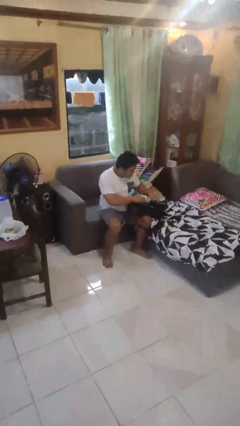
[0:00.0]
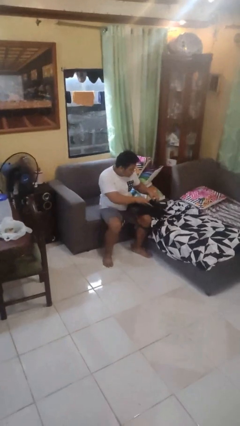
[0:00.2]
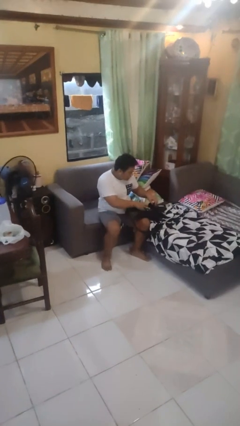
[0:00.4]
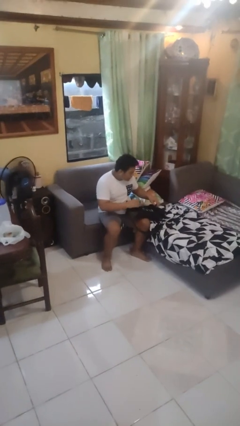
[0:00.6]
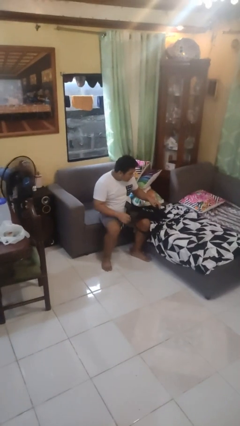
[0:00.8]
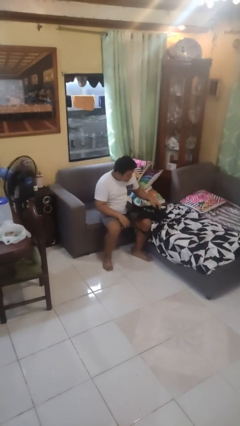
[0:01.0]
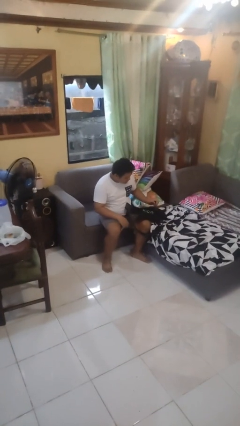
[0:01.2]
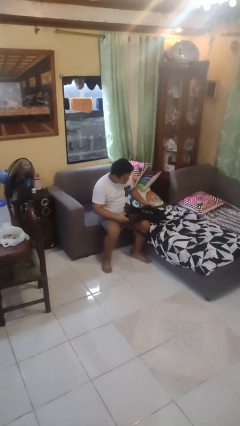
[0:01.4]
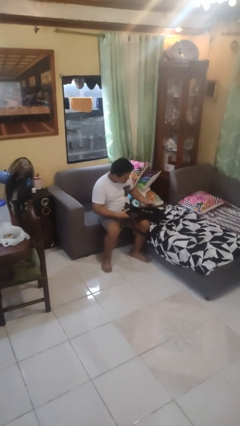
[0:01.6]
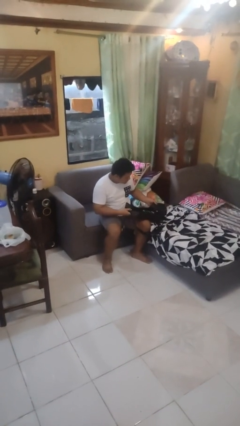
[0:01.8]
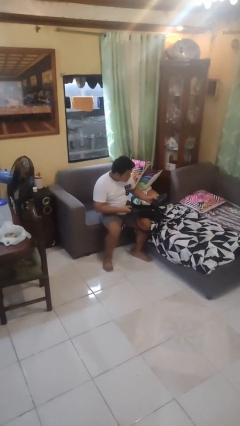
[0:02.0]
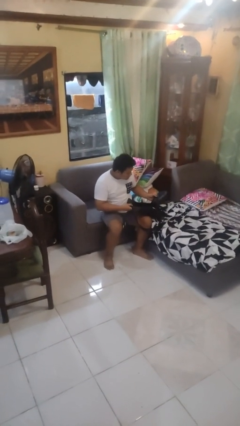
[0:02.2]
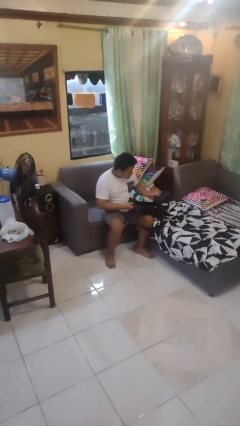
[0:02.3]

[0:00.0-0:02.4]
person puts object into backpack

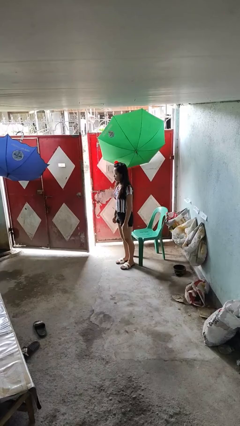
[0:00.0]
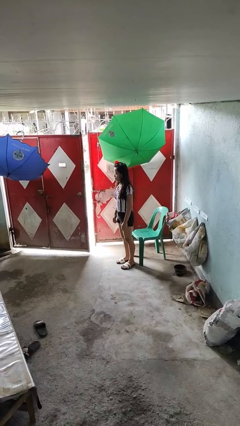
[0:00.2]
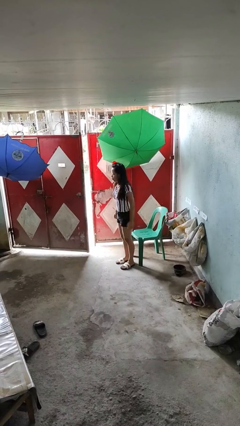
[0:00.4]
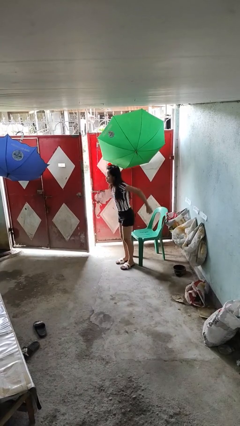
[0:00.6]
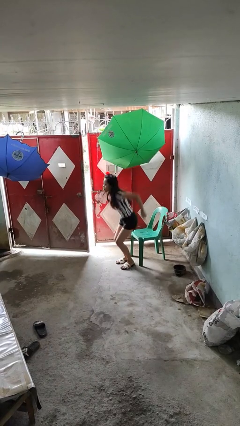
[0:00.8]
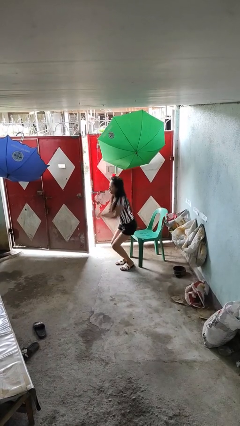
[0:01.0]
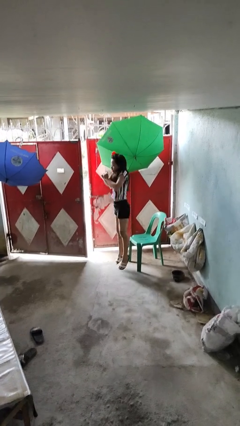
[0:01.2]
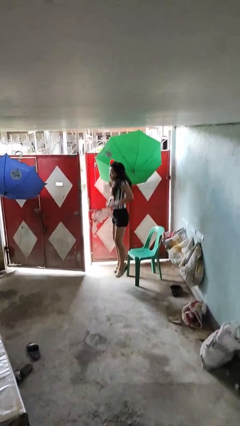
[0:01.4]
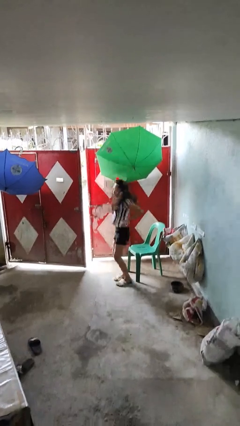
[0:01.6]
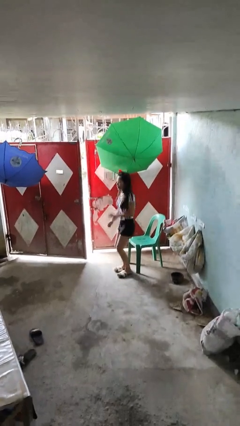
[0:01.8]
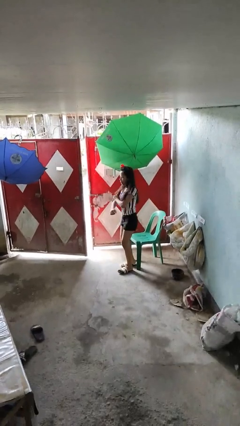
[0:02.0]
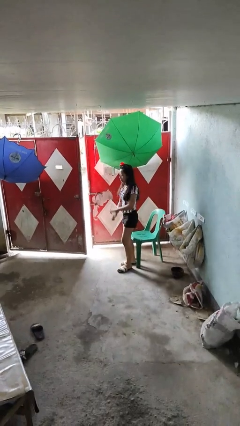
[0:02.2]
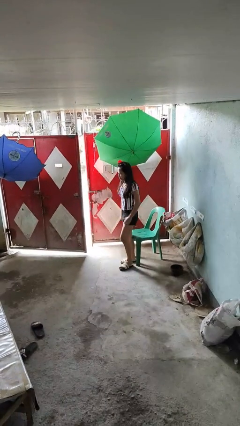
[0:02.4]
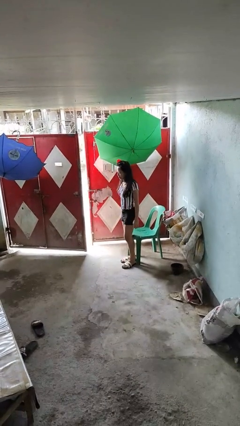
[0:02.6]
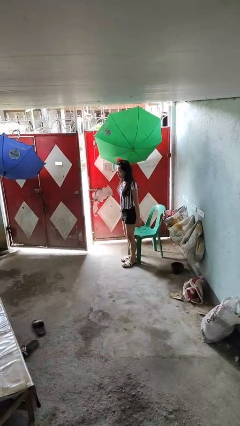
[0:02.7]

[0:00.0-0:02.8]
person jumps

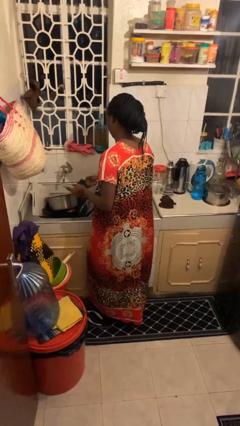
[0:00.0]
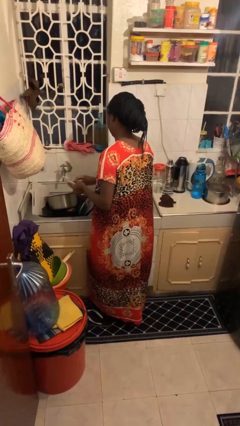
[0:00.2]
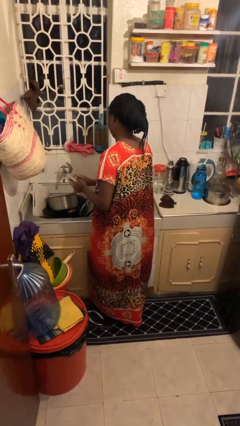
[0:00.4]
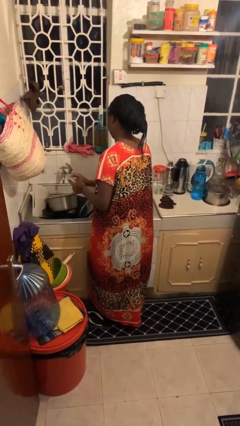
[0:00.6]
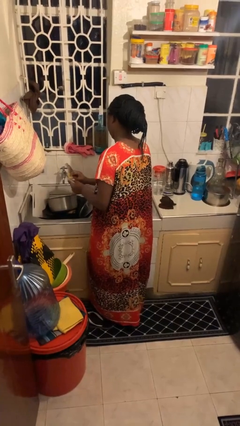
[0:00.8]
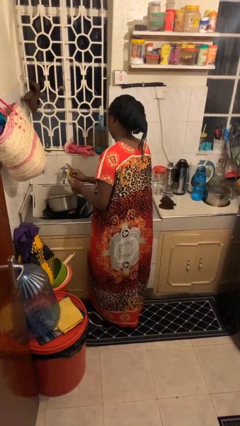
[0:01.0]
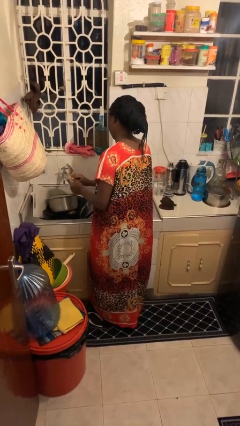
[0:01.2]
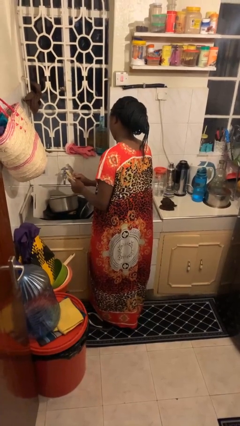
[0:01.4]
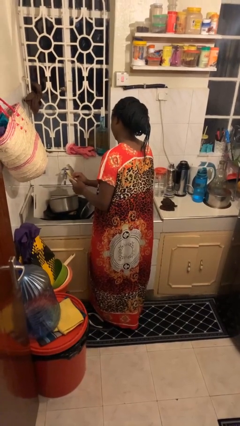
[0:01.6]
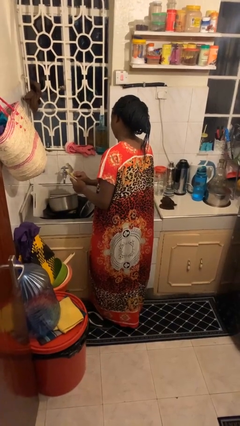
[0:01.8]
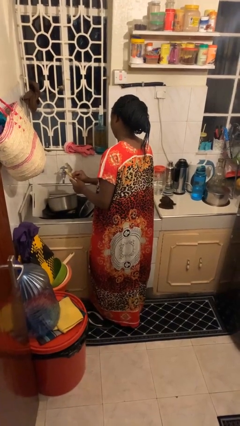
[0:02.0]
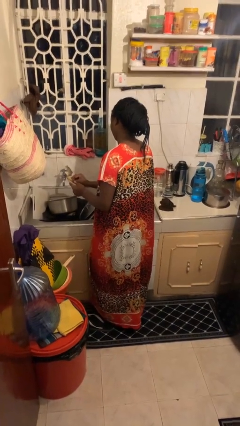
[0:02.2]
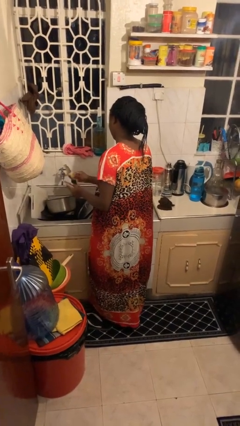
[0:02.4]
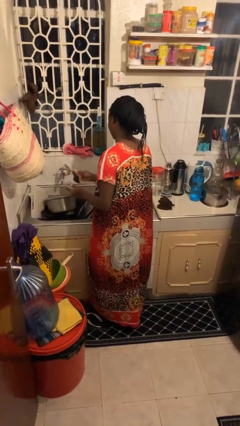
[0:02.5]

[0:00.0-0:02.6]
person washes dish

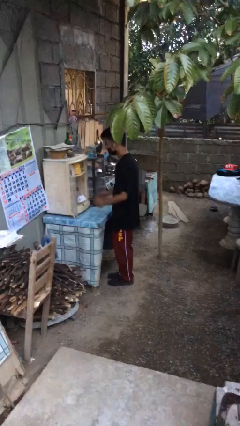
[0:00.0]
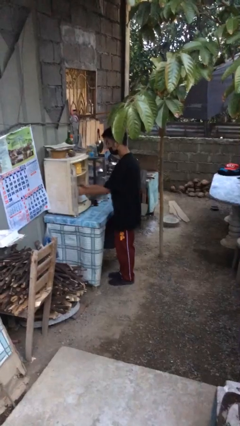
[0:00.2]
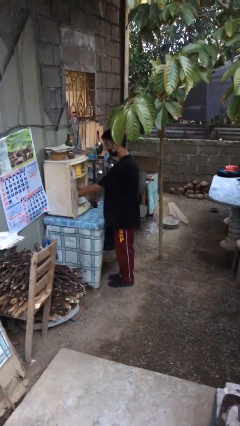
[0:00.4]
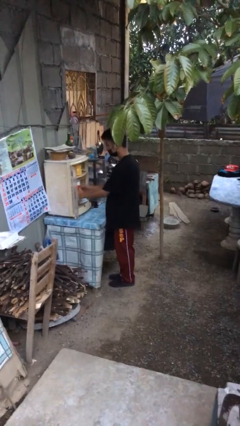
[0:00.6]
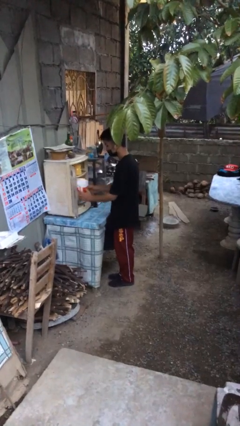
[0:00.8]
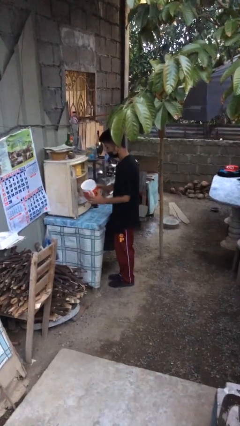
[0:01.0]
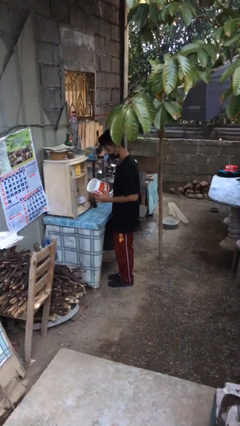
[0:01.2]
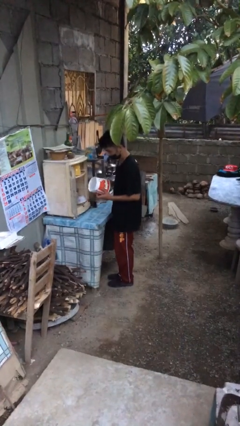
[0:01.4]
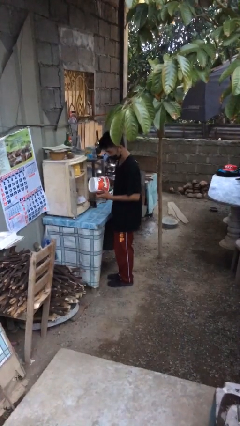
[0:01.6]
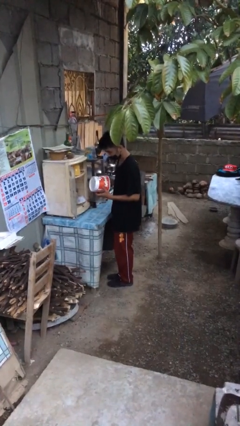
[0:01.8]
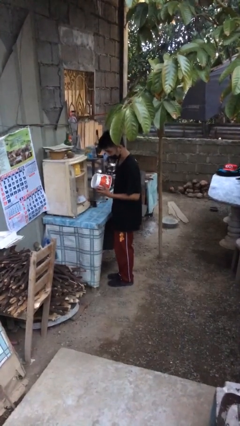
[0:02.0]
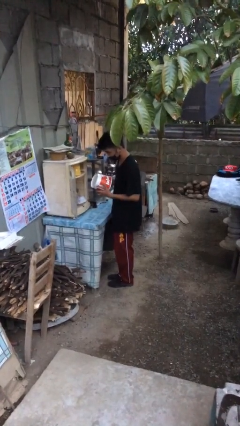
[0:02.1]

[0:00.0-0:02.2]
person picks up object from cabinet

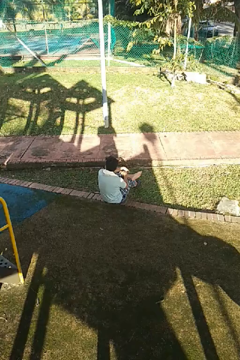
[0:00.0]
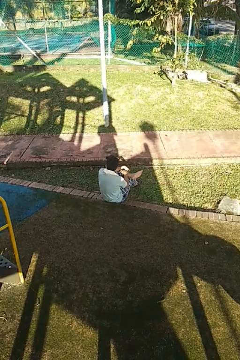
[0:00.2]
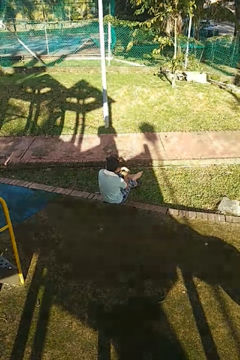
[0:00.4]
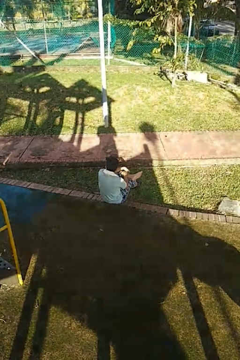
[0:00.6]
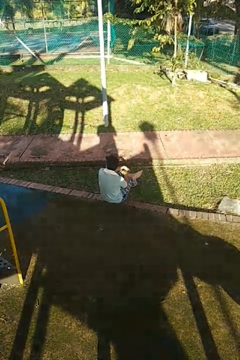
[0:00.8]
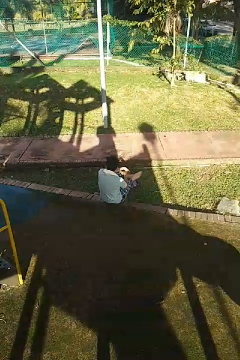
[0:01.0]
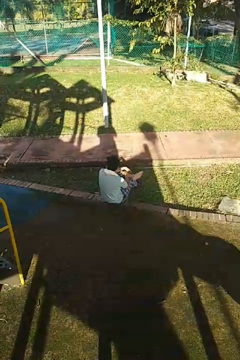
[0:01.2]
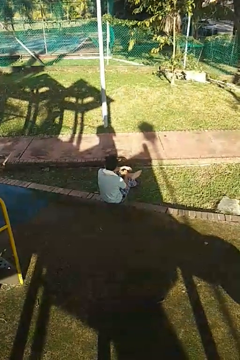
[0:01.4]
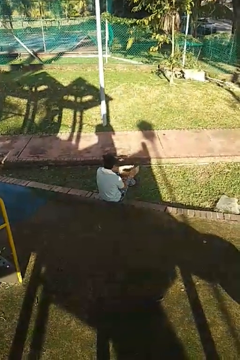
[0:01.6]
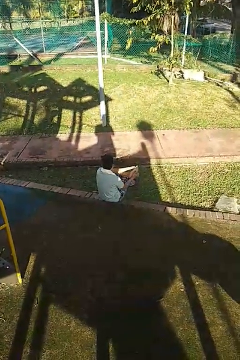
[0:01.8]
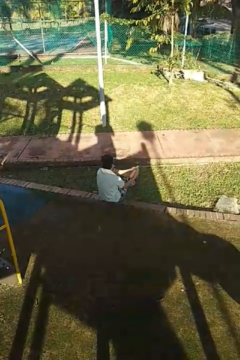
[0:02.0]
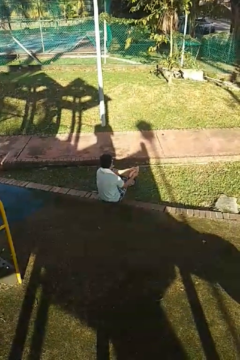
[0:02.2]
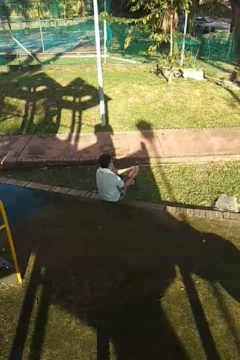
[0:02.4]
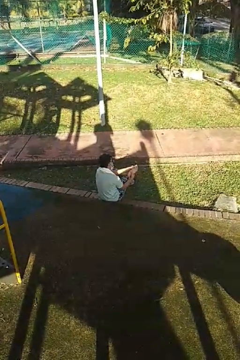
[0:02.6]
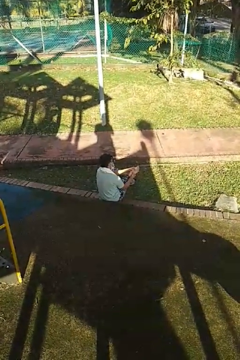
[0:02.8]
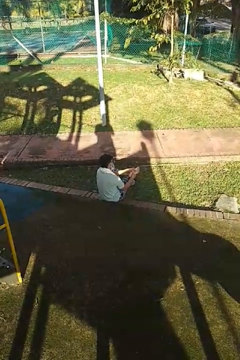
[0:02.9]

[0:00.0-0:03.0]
person rubs foot

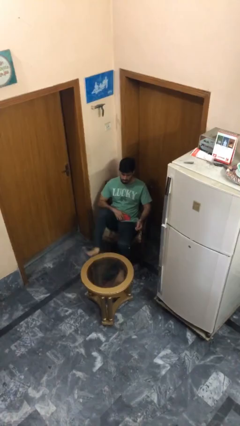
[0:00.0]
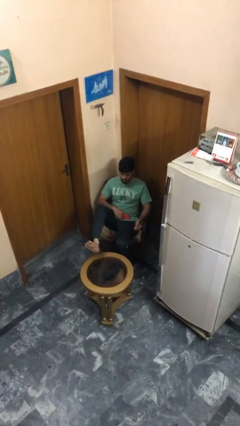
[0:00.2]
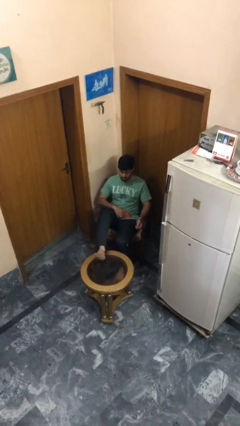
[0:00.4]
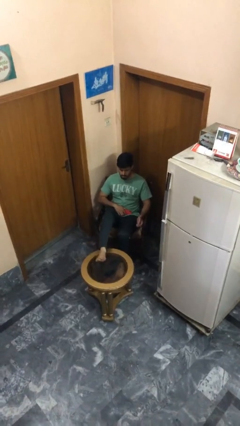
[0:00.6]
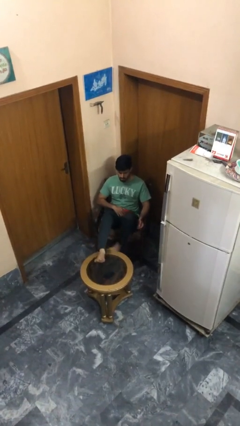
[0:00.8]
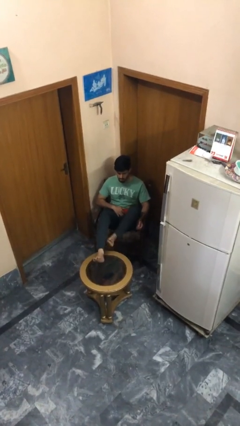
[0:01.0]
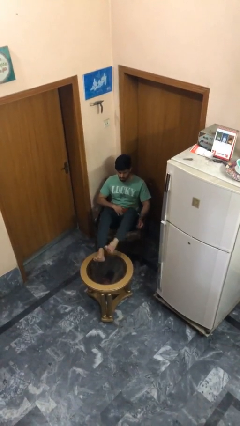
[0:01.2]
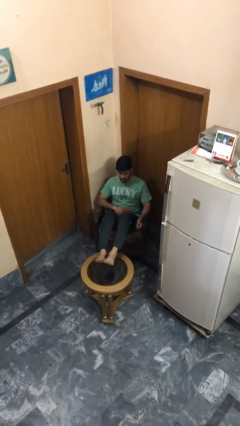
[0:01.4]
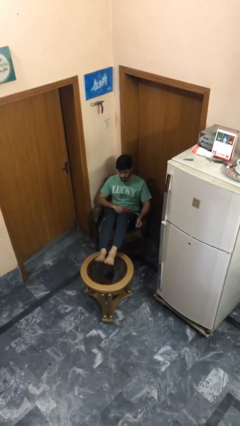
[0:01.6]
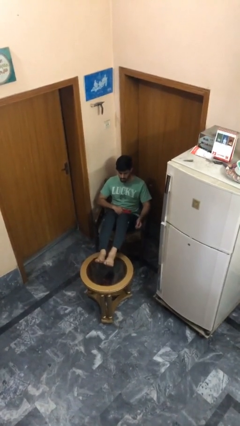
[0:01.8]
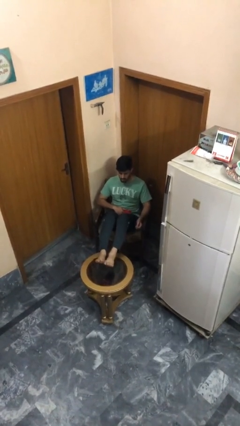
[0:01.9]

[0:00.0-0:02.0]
person puts feet up

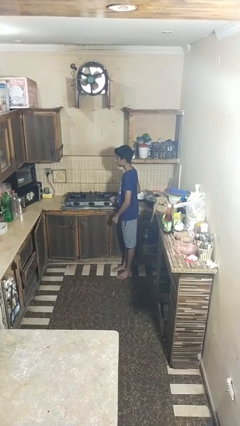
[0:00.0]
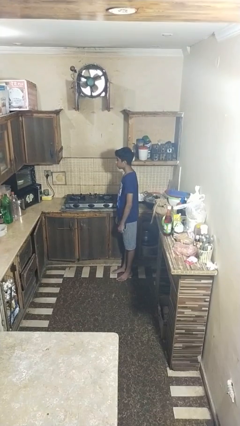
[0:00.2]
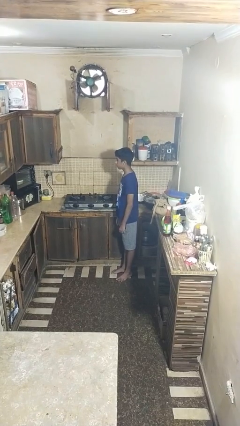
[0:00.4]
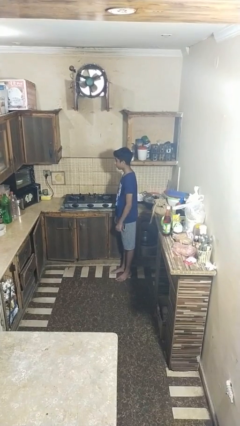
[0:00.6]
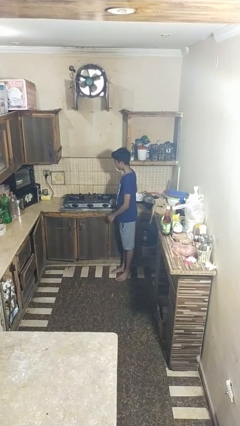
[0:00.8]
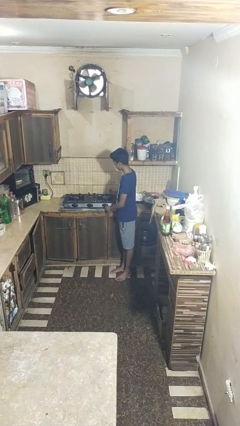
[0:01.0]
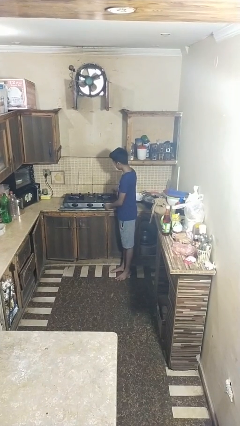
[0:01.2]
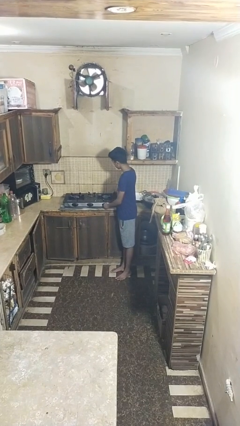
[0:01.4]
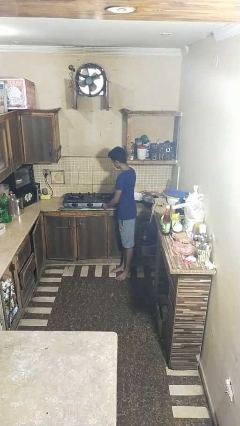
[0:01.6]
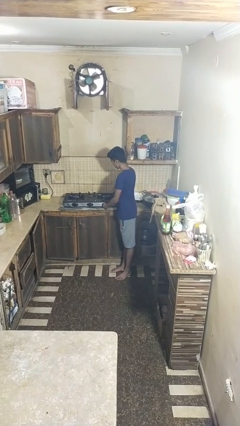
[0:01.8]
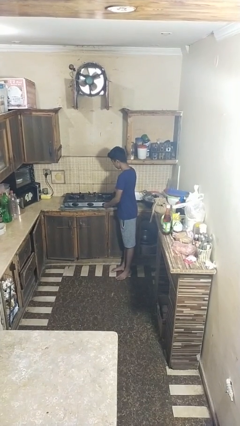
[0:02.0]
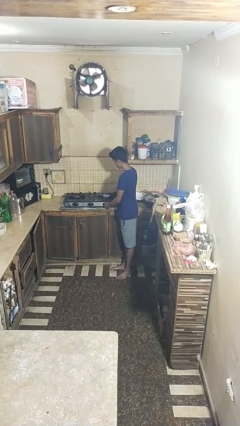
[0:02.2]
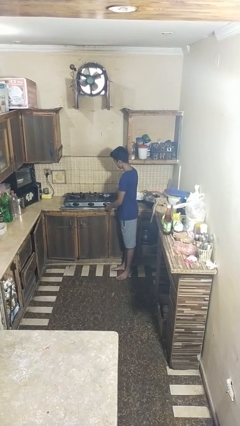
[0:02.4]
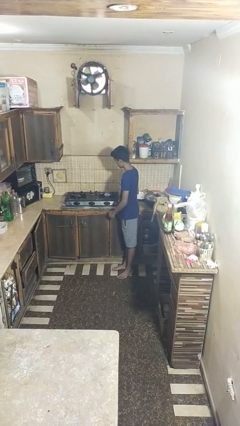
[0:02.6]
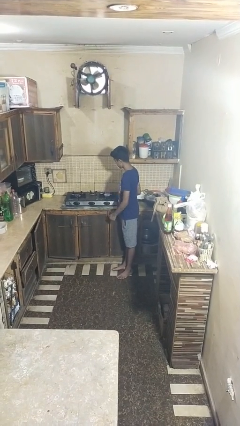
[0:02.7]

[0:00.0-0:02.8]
person turns on stovetop
